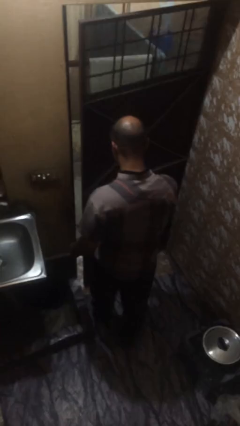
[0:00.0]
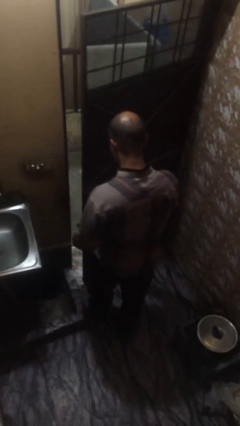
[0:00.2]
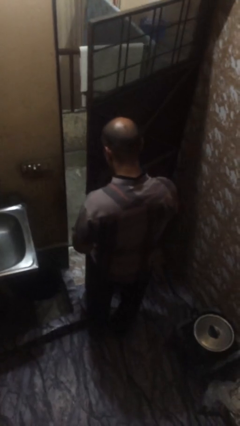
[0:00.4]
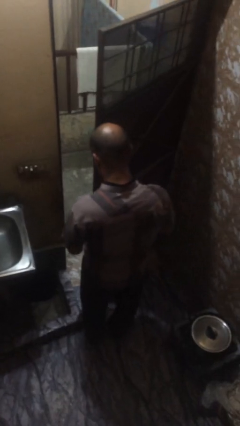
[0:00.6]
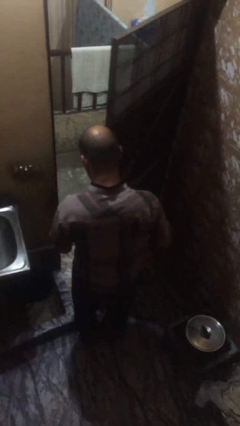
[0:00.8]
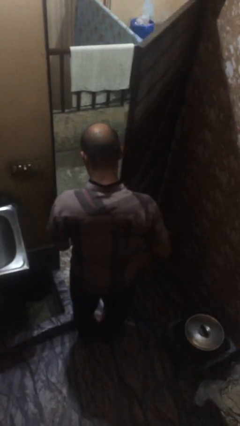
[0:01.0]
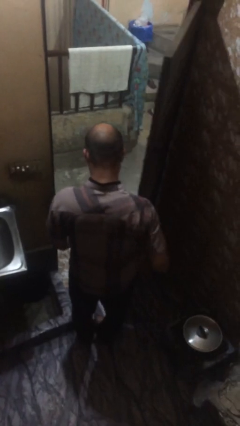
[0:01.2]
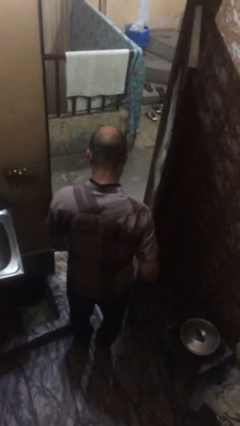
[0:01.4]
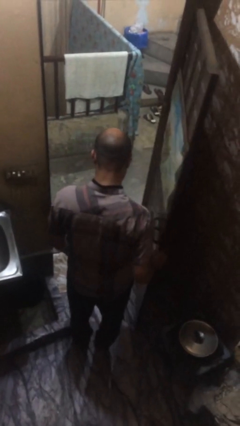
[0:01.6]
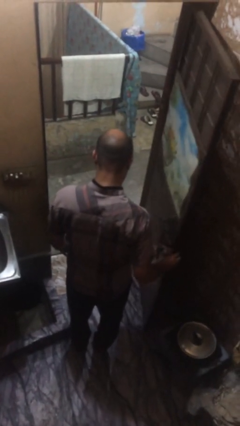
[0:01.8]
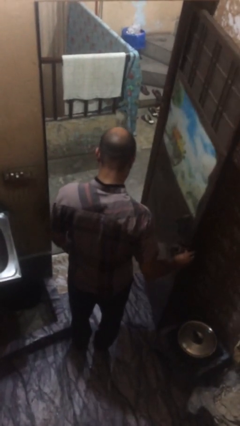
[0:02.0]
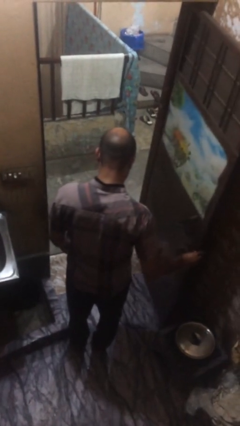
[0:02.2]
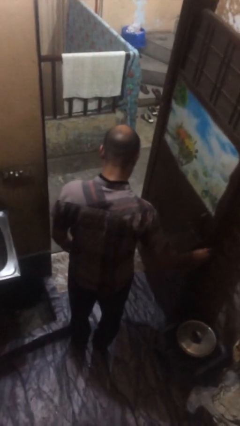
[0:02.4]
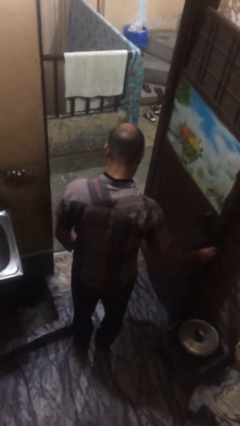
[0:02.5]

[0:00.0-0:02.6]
person opens facility door

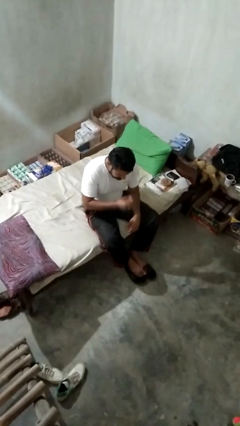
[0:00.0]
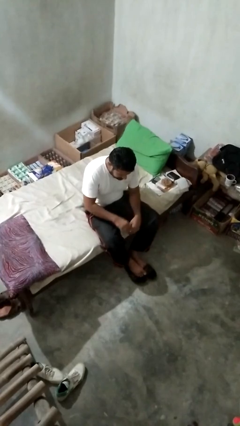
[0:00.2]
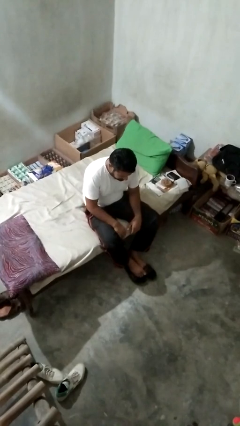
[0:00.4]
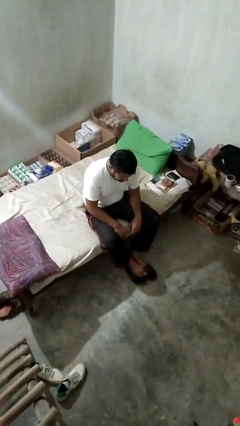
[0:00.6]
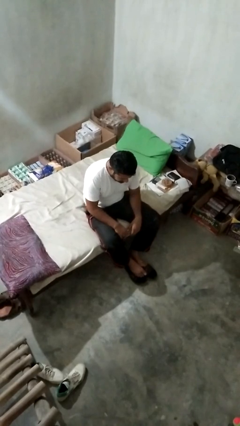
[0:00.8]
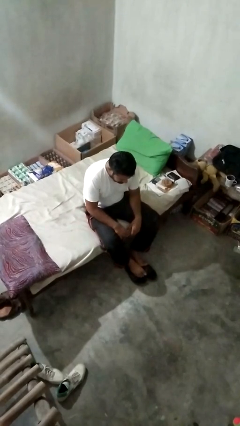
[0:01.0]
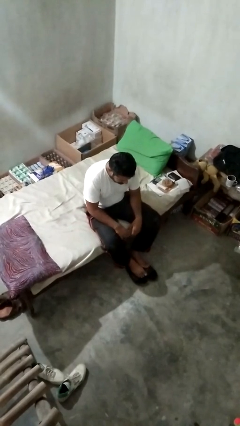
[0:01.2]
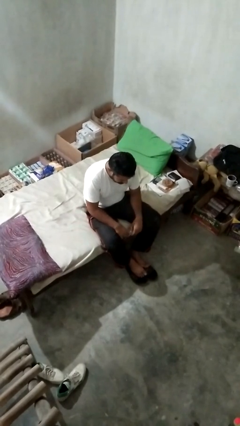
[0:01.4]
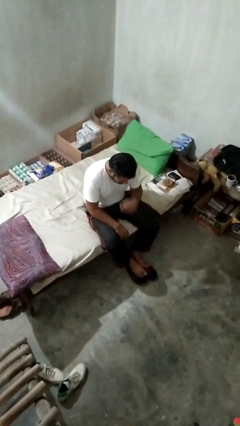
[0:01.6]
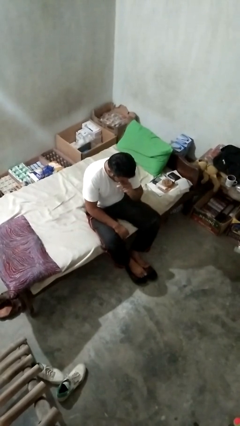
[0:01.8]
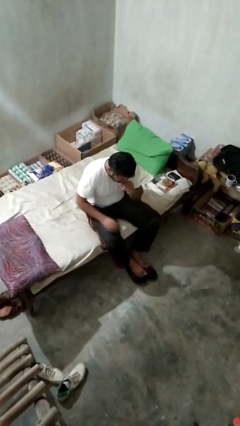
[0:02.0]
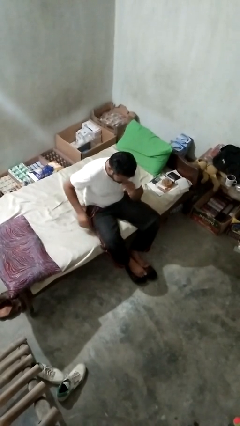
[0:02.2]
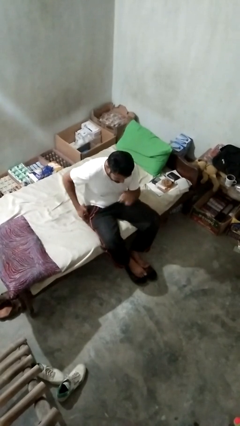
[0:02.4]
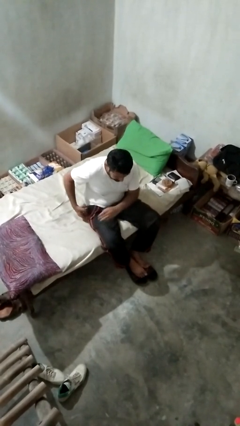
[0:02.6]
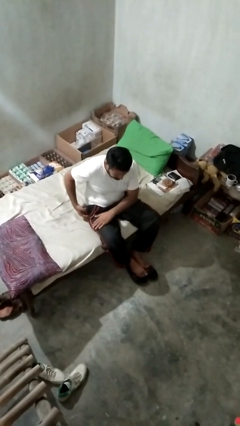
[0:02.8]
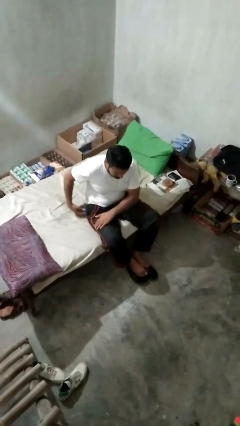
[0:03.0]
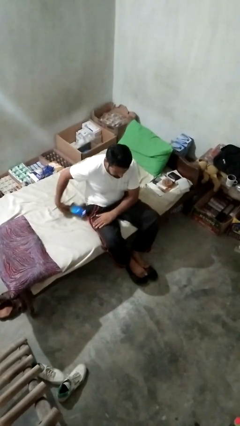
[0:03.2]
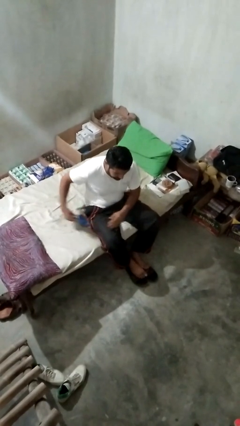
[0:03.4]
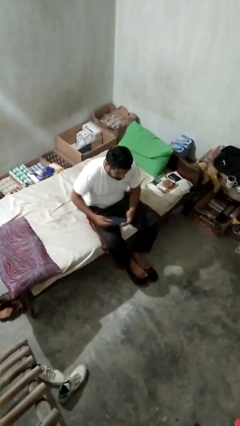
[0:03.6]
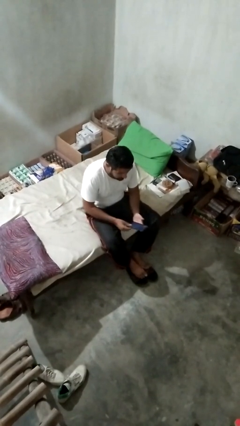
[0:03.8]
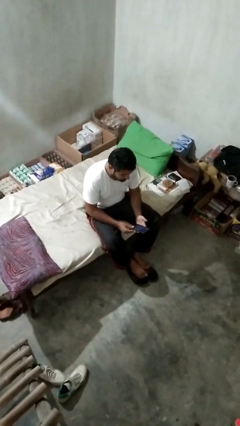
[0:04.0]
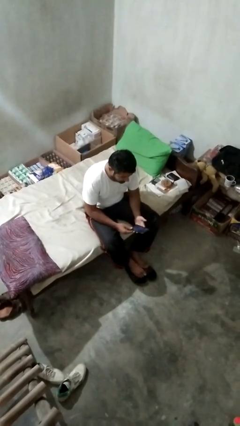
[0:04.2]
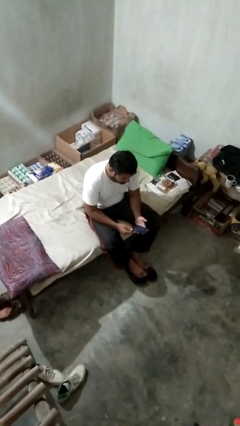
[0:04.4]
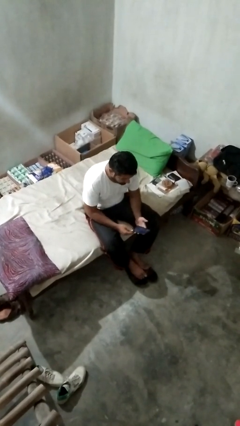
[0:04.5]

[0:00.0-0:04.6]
person takes phone from pocket

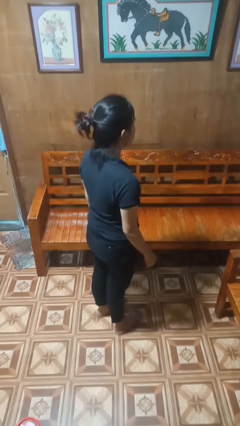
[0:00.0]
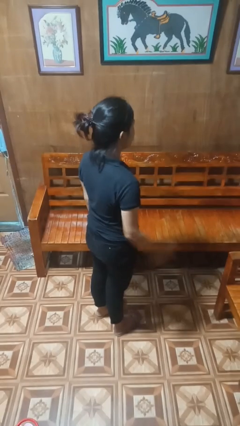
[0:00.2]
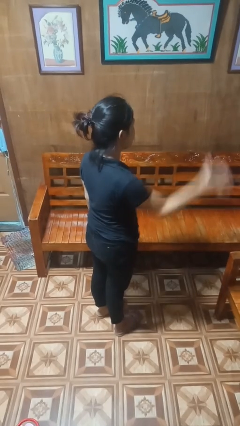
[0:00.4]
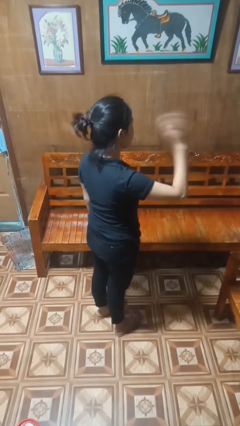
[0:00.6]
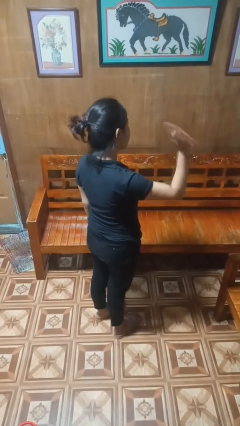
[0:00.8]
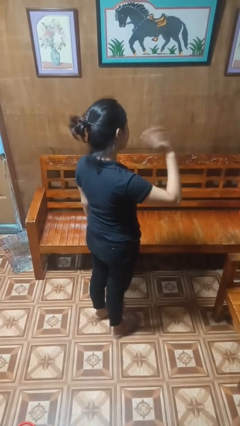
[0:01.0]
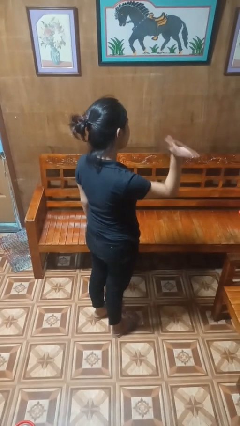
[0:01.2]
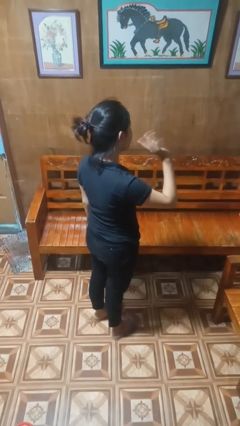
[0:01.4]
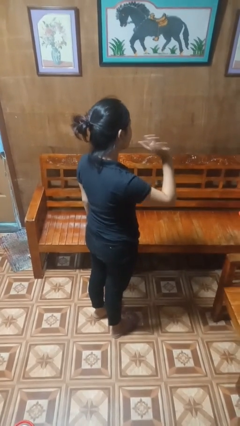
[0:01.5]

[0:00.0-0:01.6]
person waves at person

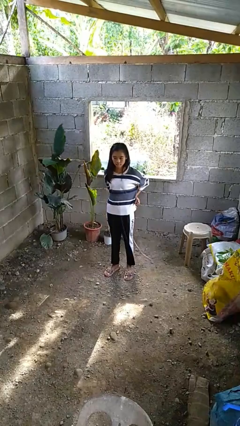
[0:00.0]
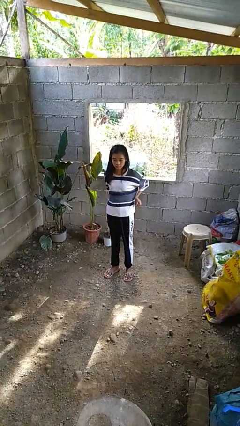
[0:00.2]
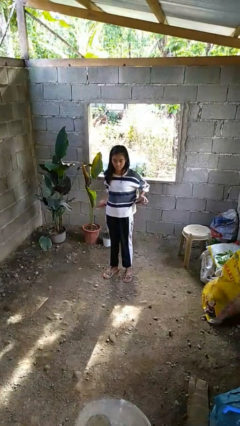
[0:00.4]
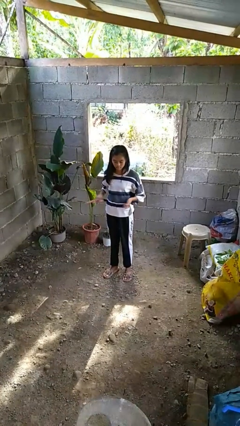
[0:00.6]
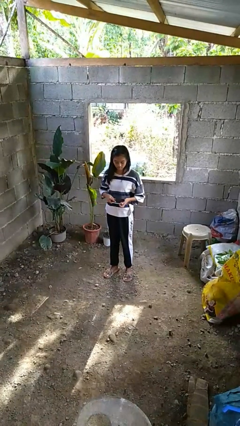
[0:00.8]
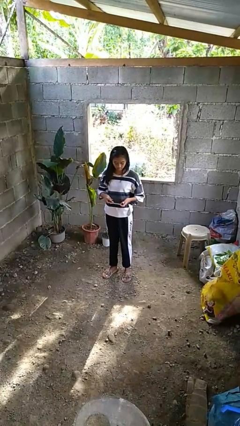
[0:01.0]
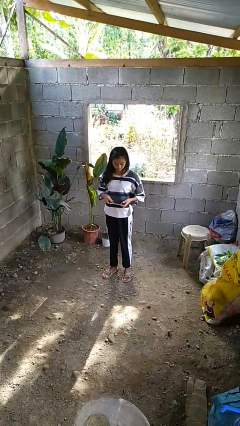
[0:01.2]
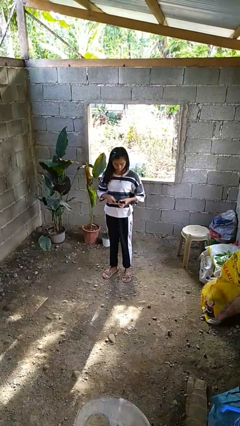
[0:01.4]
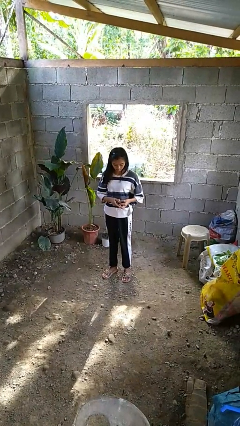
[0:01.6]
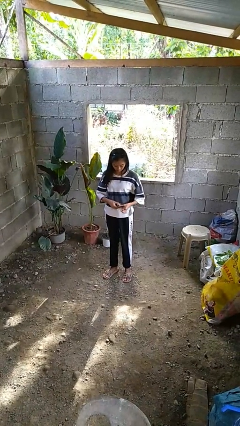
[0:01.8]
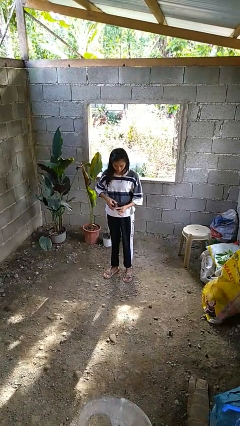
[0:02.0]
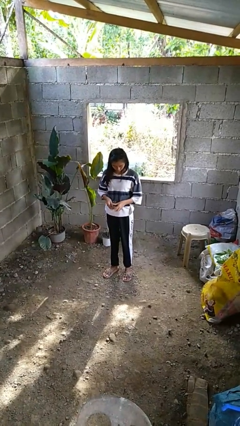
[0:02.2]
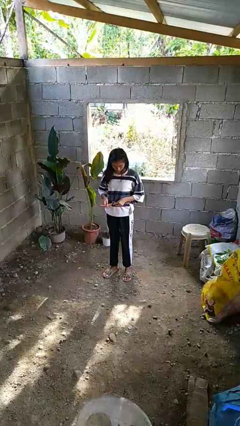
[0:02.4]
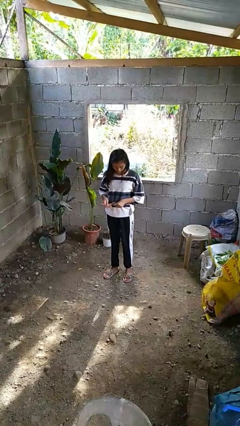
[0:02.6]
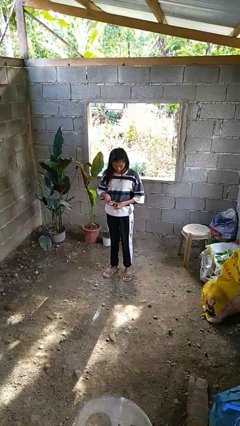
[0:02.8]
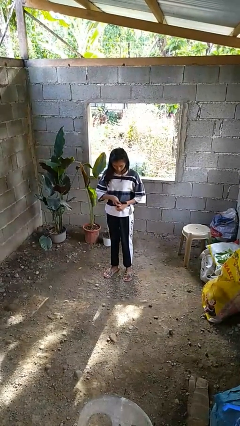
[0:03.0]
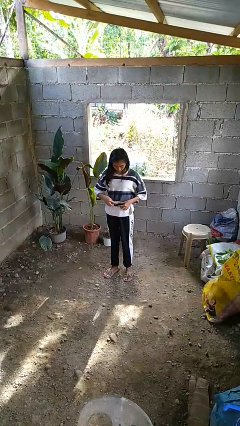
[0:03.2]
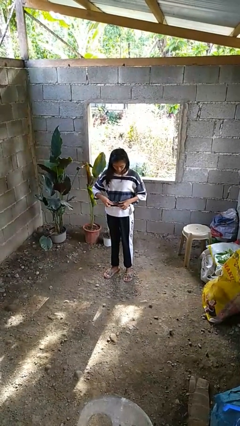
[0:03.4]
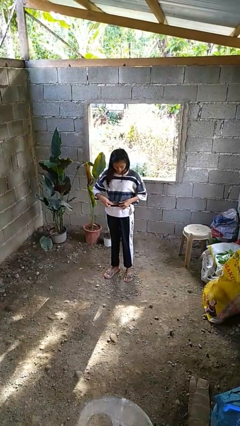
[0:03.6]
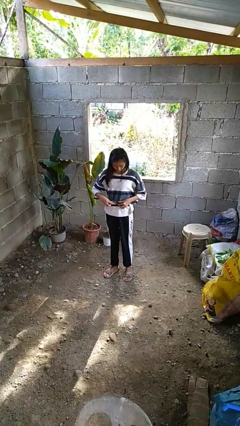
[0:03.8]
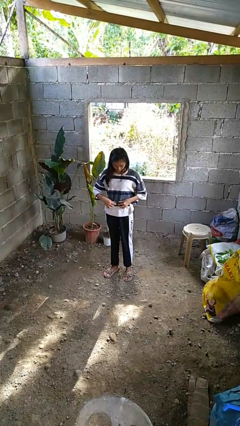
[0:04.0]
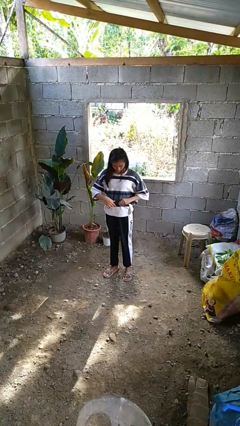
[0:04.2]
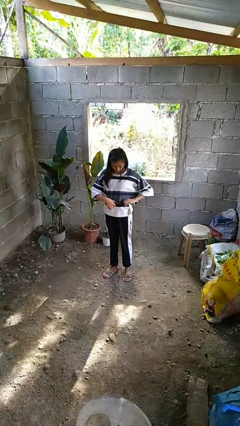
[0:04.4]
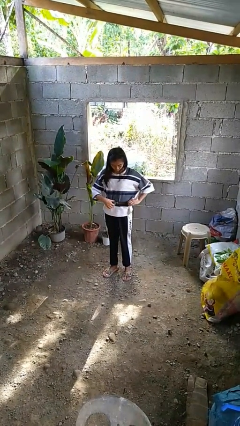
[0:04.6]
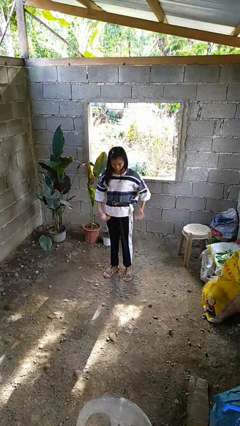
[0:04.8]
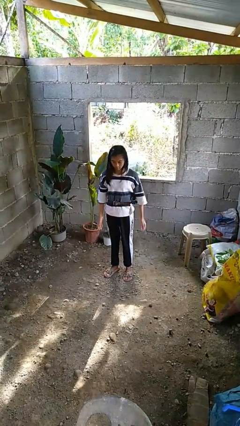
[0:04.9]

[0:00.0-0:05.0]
person puts on belt

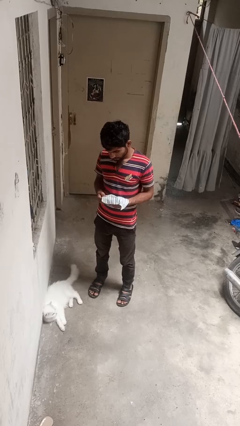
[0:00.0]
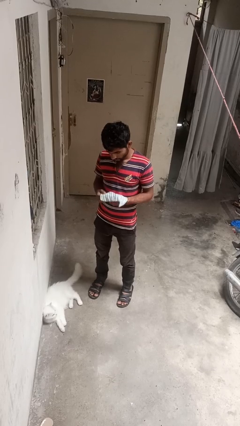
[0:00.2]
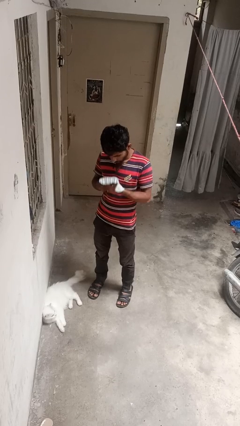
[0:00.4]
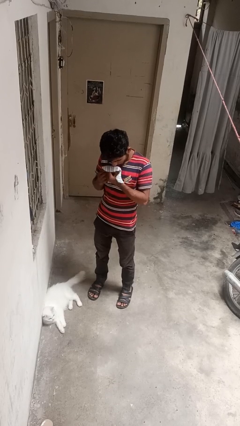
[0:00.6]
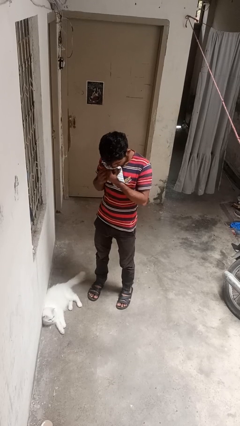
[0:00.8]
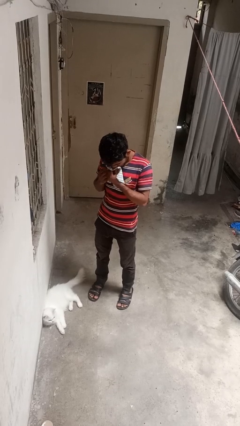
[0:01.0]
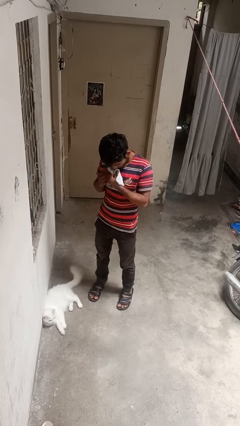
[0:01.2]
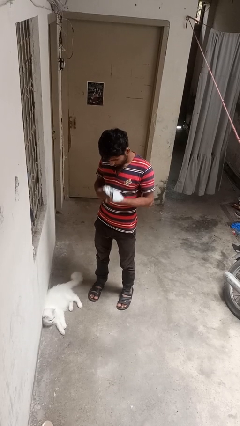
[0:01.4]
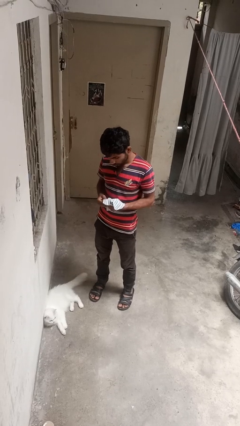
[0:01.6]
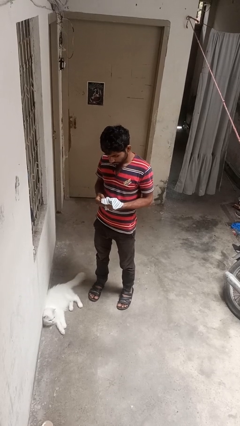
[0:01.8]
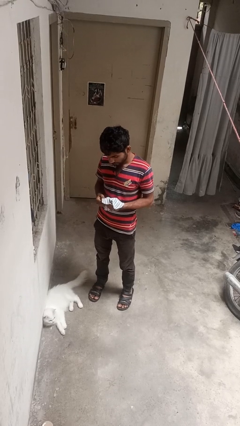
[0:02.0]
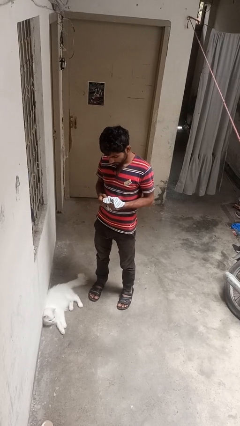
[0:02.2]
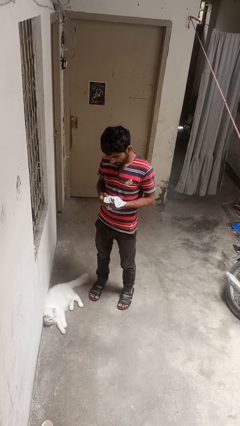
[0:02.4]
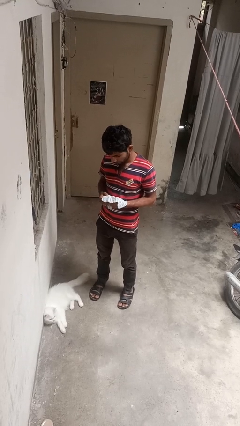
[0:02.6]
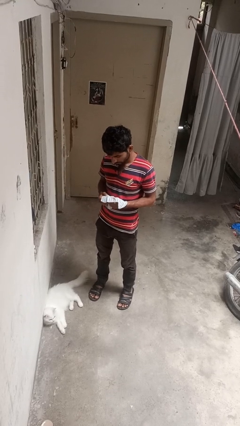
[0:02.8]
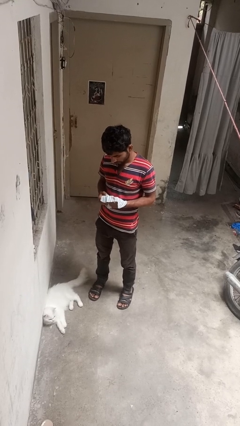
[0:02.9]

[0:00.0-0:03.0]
person blows nose

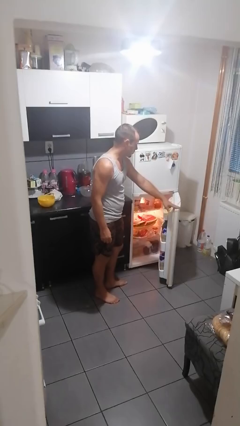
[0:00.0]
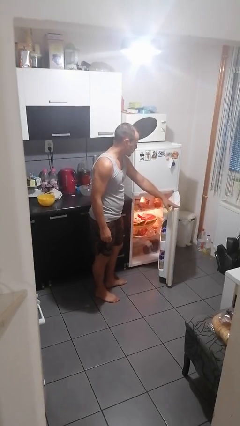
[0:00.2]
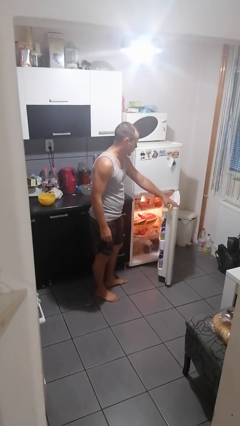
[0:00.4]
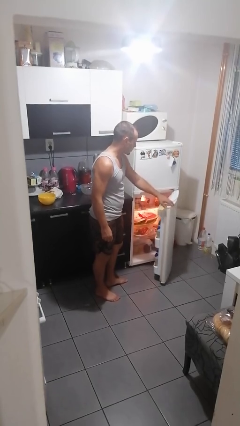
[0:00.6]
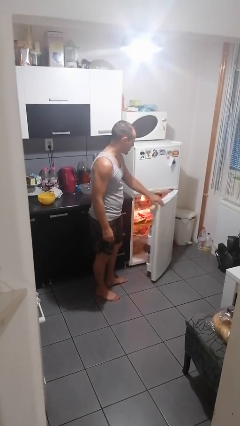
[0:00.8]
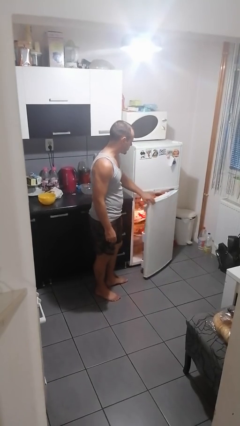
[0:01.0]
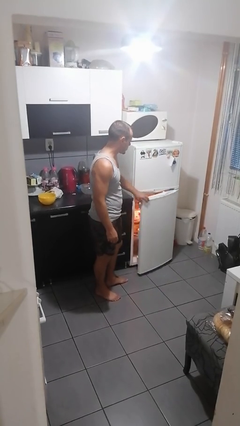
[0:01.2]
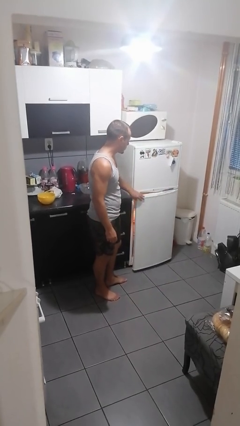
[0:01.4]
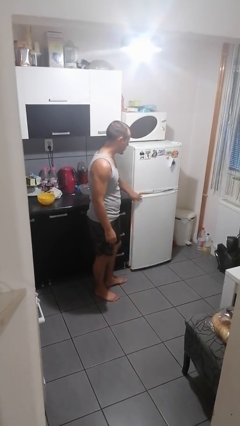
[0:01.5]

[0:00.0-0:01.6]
person closes refrigerator
